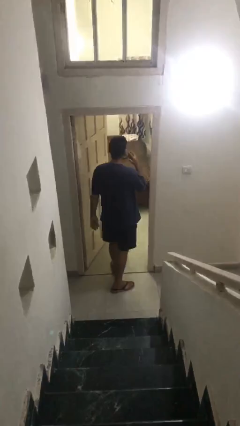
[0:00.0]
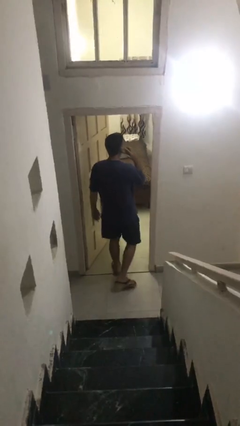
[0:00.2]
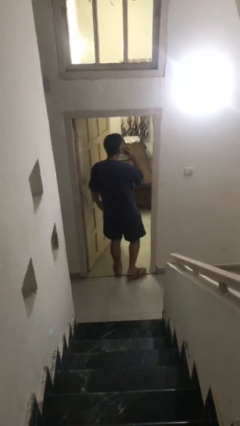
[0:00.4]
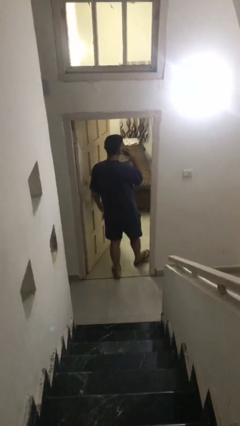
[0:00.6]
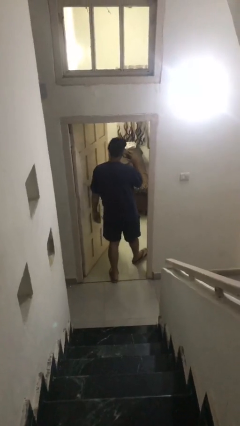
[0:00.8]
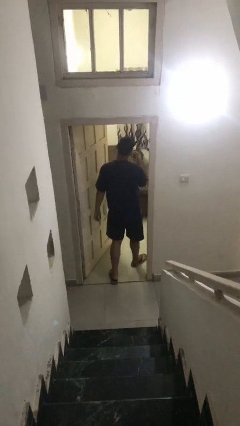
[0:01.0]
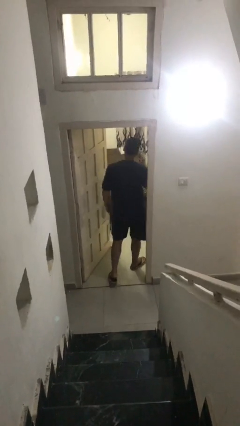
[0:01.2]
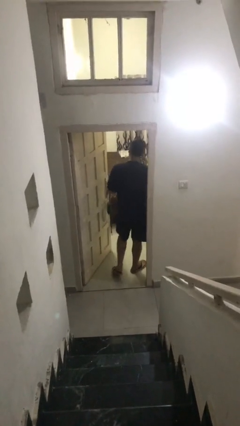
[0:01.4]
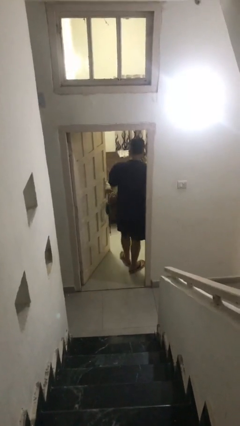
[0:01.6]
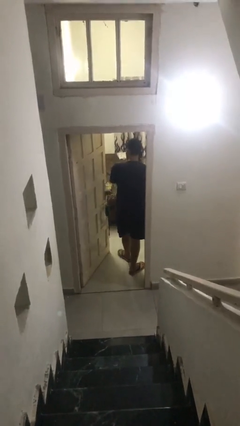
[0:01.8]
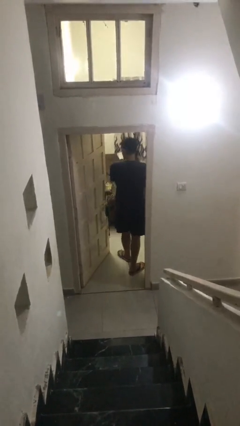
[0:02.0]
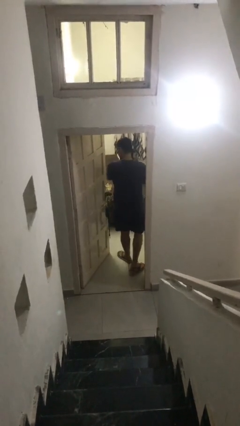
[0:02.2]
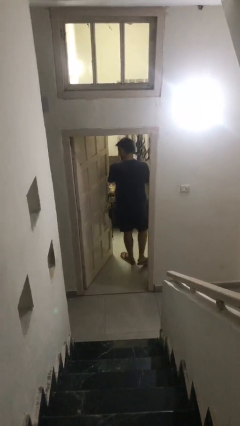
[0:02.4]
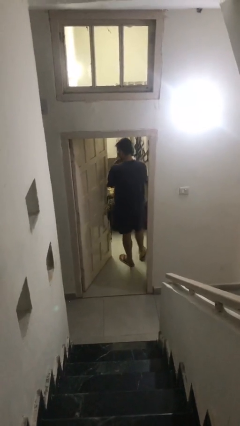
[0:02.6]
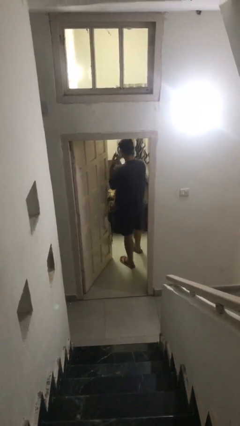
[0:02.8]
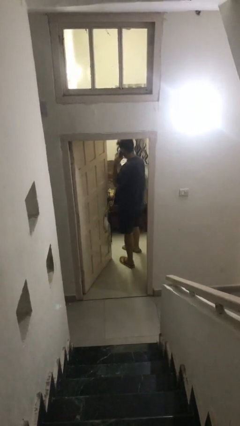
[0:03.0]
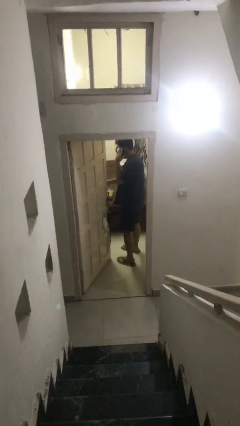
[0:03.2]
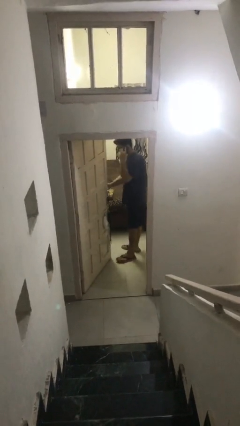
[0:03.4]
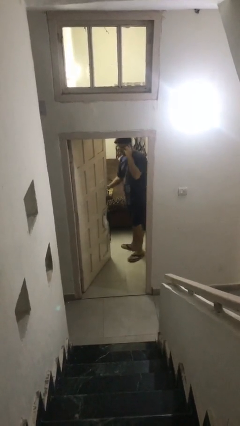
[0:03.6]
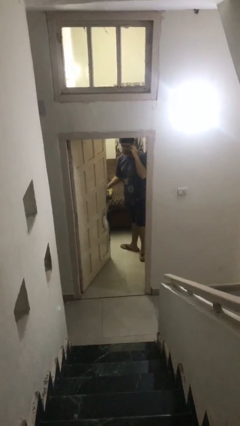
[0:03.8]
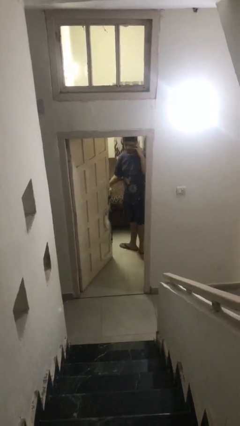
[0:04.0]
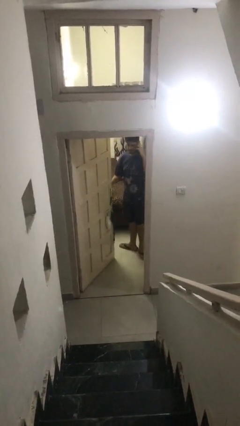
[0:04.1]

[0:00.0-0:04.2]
person exits scene through structure

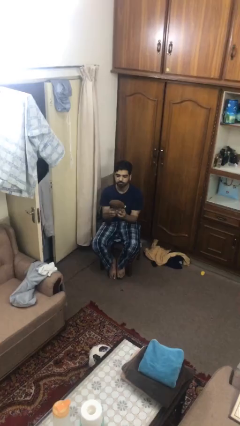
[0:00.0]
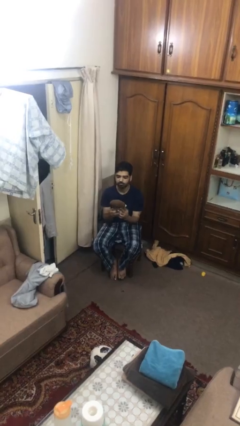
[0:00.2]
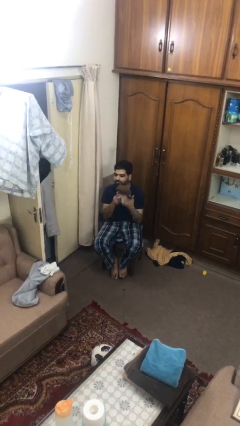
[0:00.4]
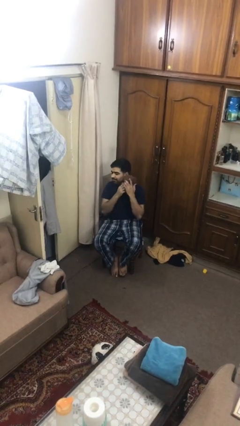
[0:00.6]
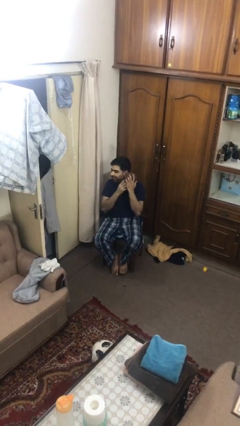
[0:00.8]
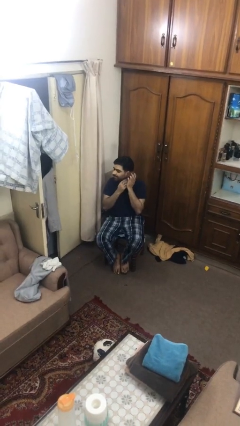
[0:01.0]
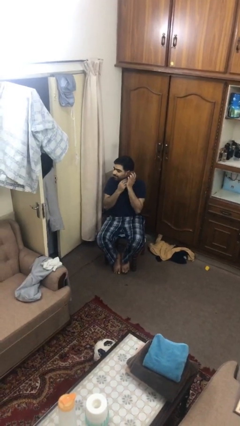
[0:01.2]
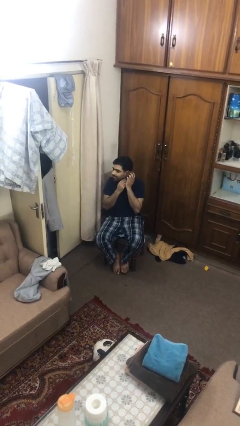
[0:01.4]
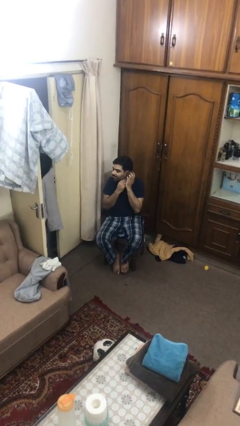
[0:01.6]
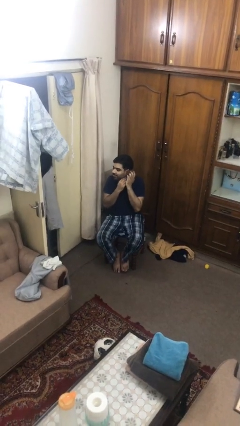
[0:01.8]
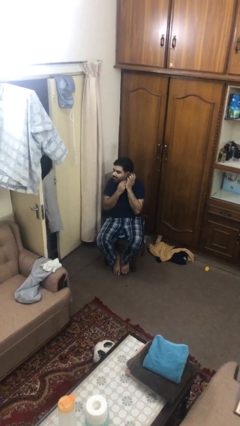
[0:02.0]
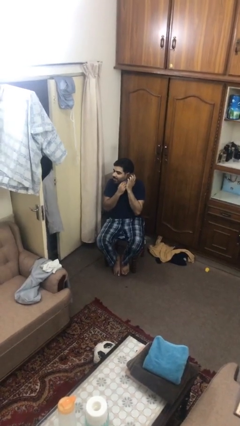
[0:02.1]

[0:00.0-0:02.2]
person hugs stuffed animal

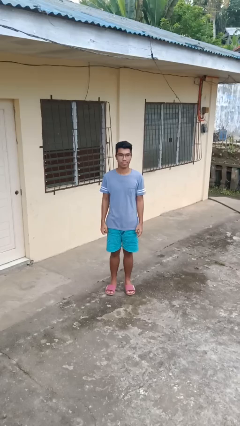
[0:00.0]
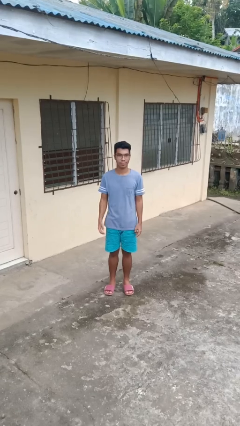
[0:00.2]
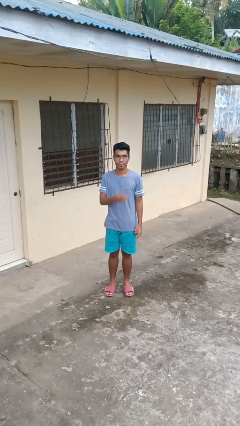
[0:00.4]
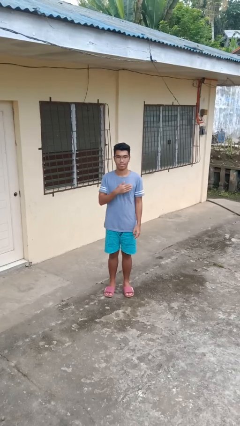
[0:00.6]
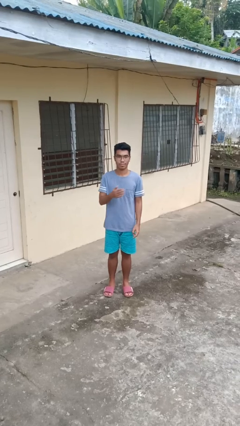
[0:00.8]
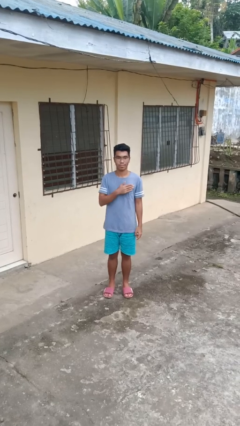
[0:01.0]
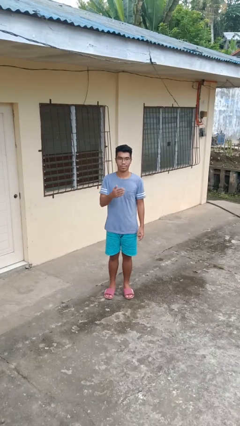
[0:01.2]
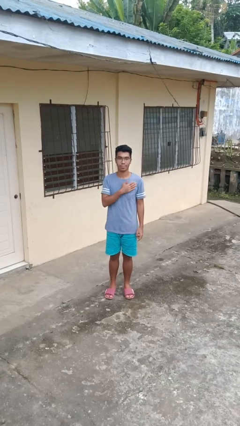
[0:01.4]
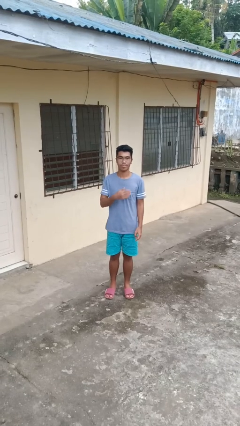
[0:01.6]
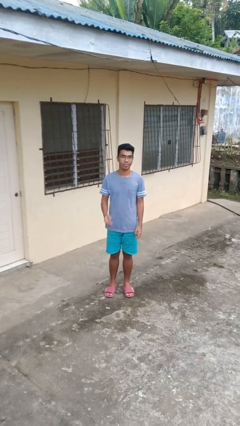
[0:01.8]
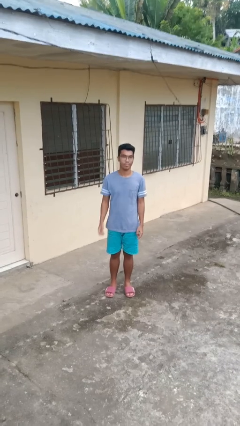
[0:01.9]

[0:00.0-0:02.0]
person drums on chest

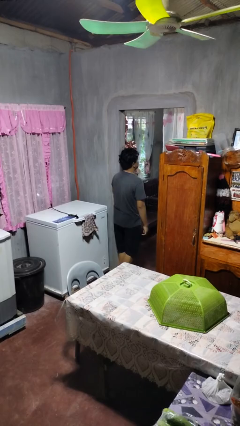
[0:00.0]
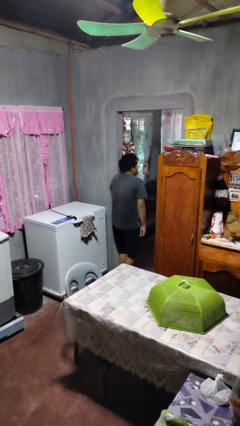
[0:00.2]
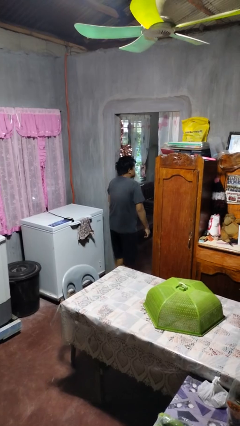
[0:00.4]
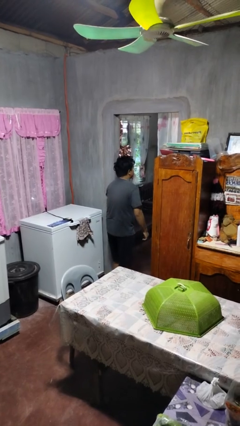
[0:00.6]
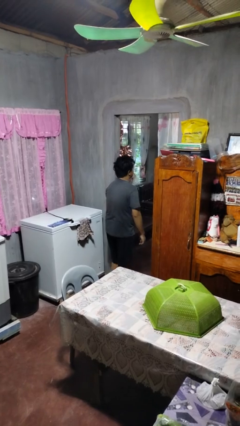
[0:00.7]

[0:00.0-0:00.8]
person bumps into wall

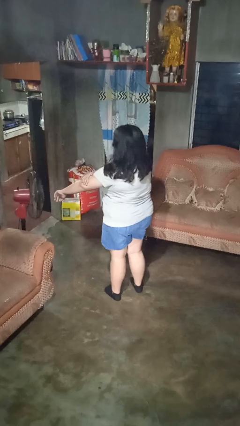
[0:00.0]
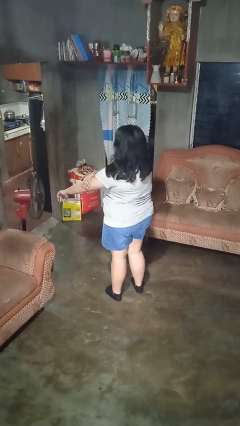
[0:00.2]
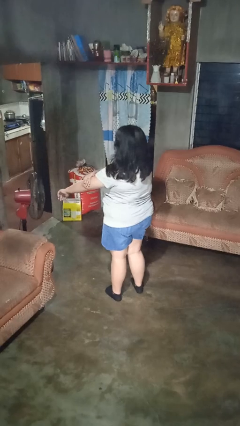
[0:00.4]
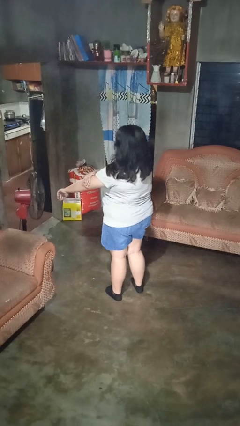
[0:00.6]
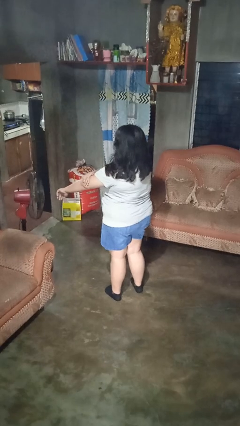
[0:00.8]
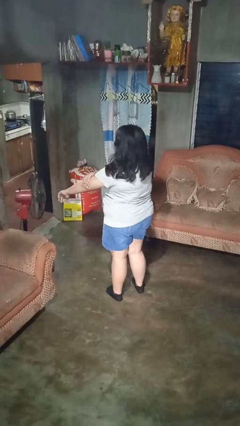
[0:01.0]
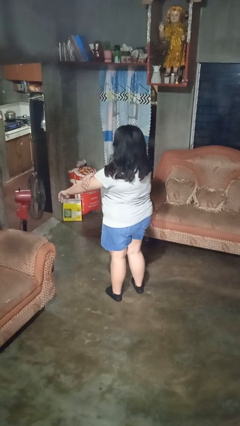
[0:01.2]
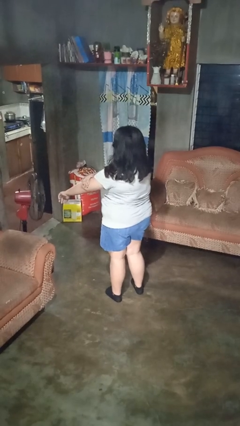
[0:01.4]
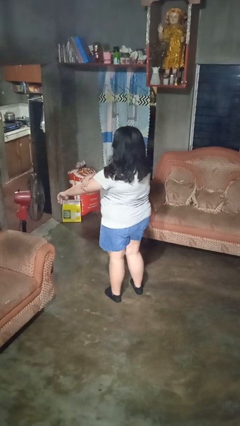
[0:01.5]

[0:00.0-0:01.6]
person swats bug

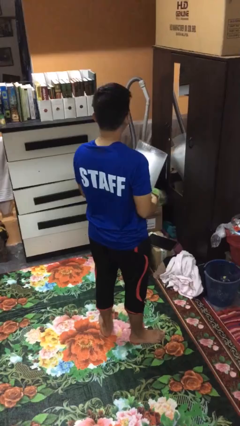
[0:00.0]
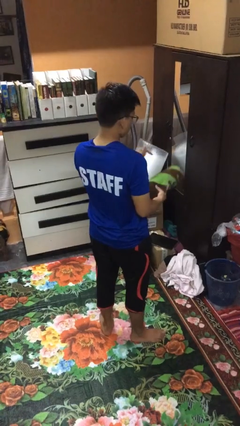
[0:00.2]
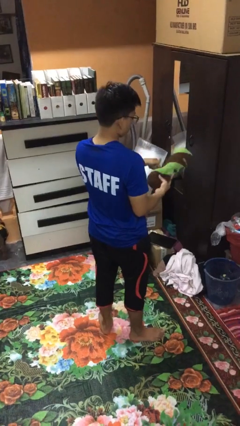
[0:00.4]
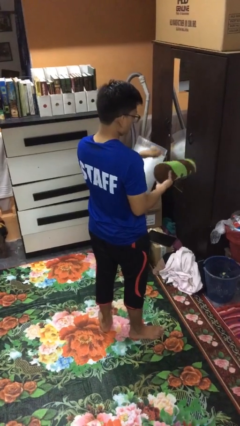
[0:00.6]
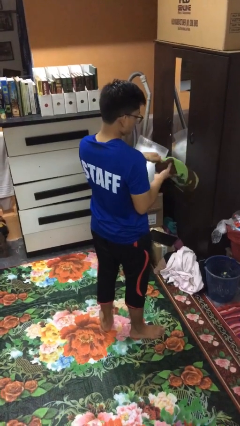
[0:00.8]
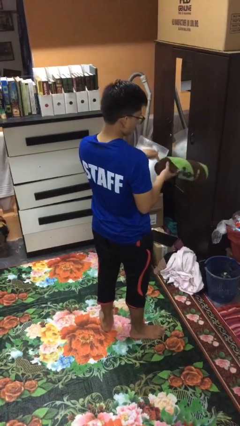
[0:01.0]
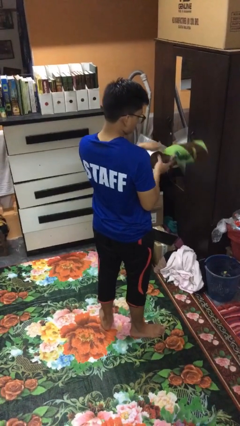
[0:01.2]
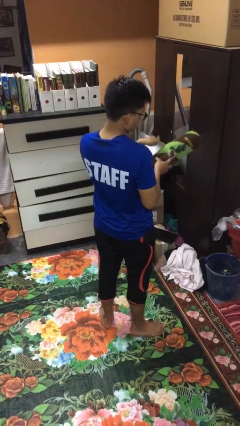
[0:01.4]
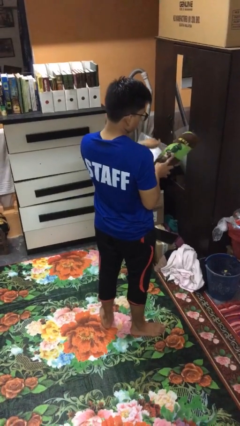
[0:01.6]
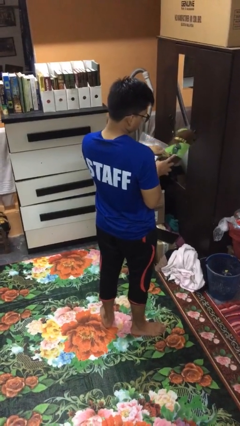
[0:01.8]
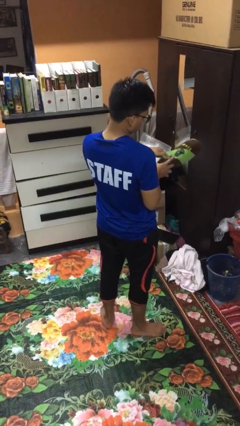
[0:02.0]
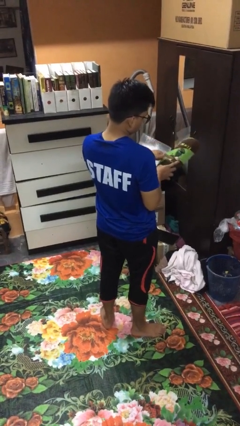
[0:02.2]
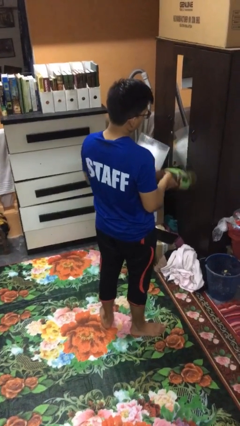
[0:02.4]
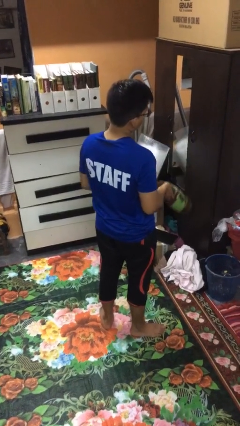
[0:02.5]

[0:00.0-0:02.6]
person taps object with finger

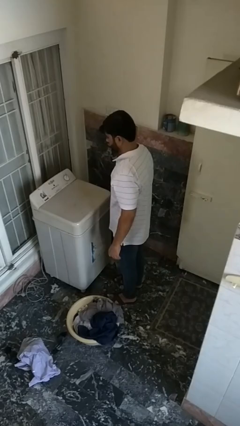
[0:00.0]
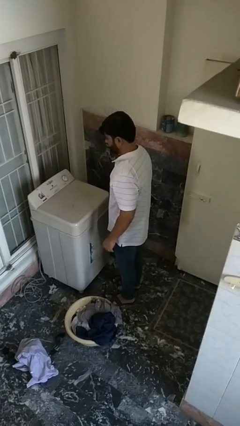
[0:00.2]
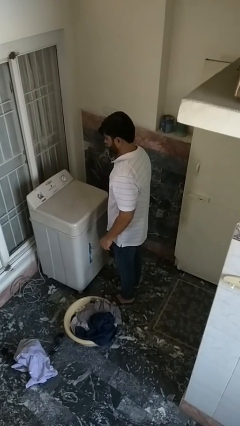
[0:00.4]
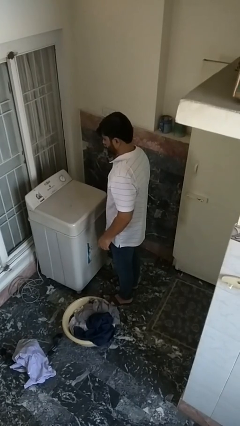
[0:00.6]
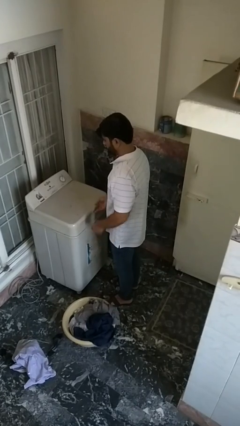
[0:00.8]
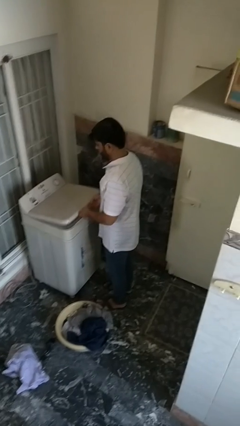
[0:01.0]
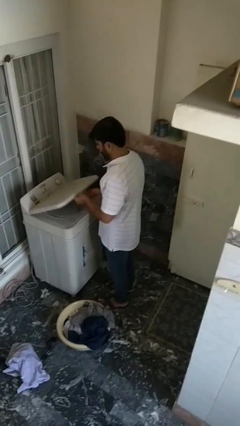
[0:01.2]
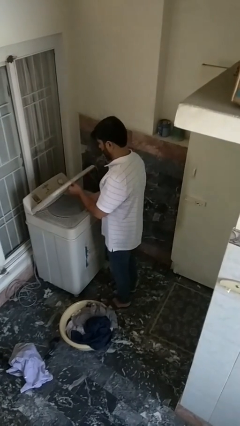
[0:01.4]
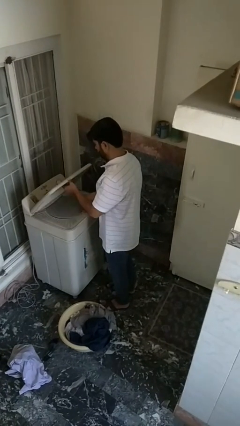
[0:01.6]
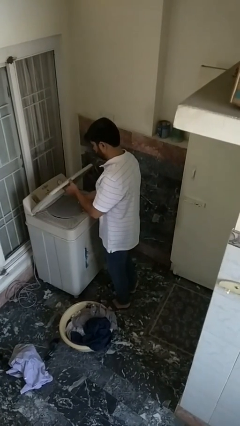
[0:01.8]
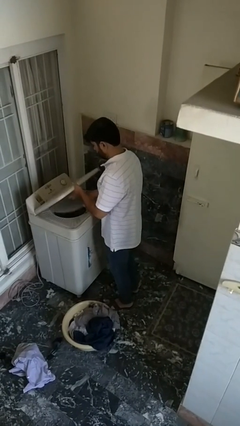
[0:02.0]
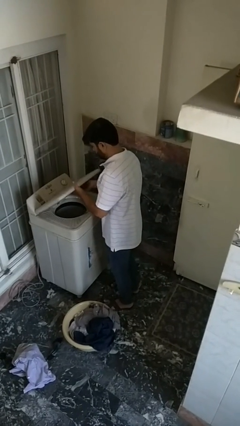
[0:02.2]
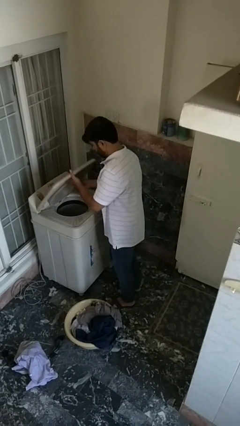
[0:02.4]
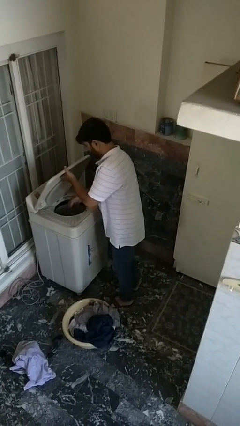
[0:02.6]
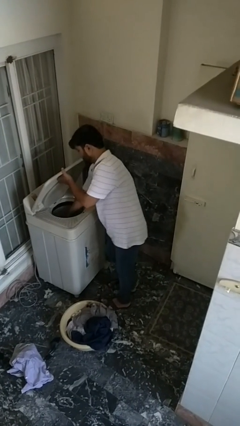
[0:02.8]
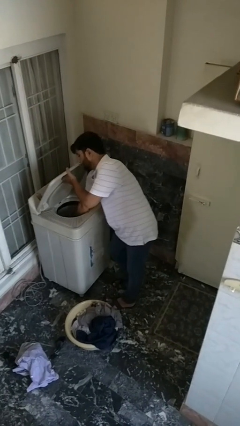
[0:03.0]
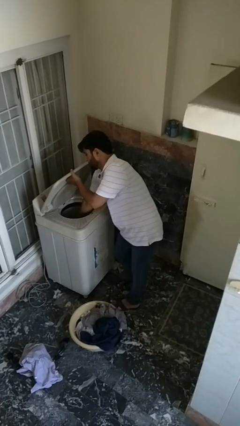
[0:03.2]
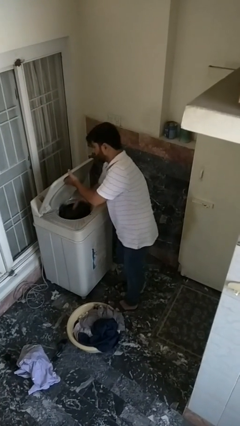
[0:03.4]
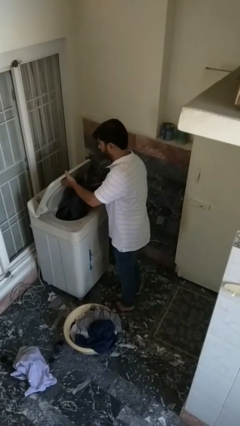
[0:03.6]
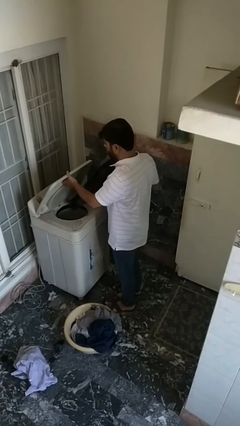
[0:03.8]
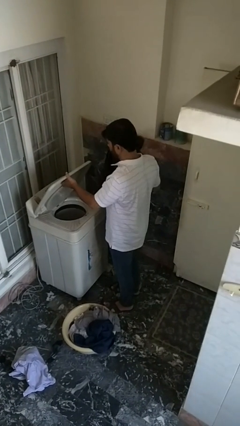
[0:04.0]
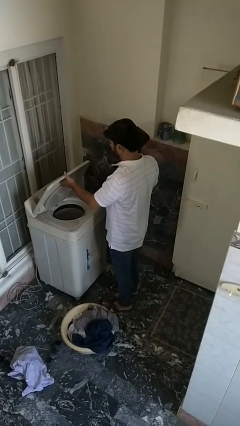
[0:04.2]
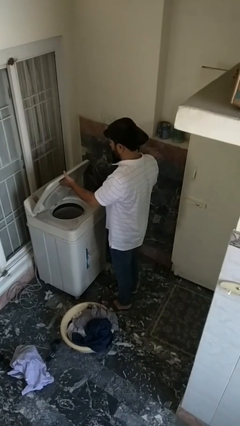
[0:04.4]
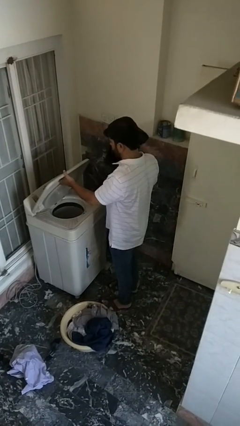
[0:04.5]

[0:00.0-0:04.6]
person unloads dryer
